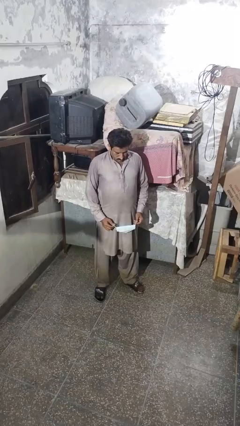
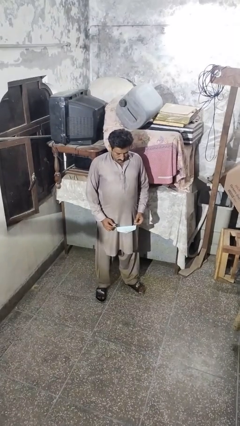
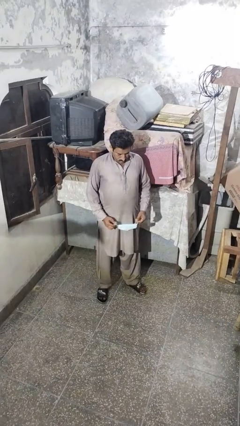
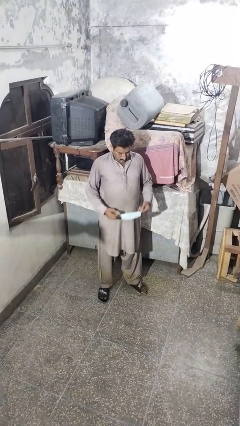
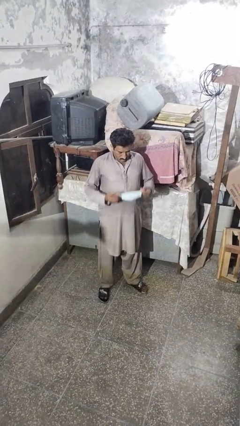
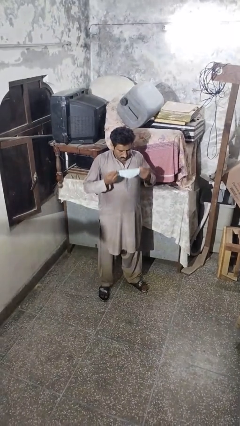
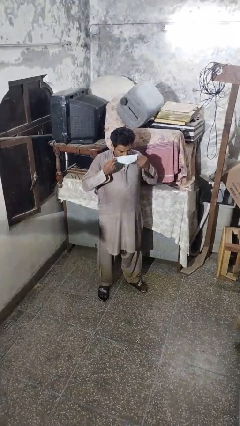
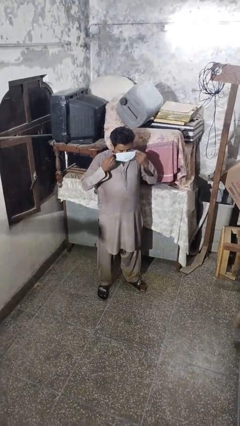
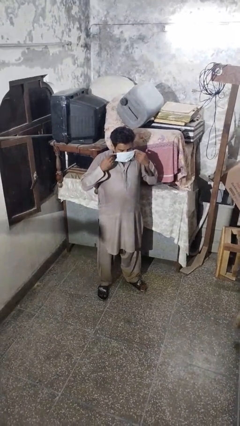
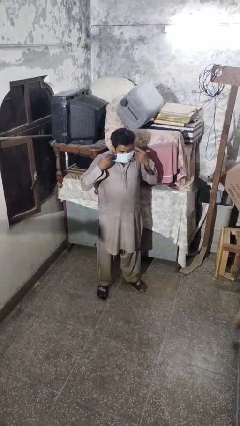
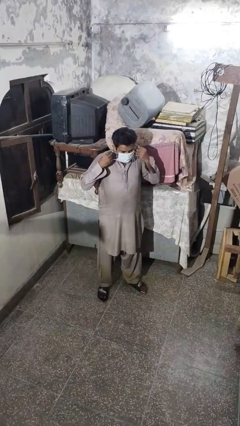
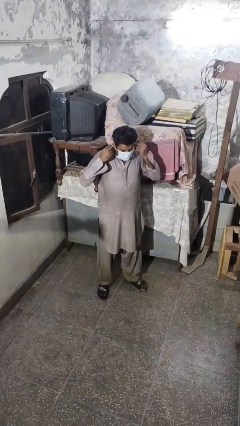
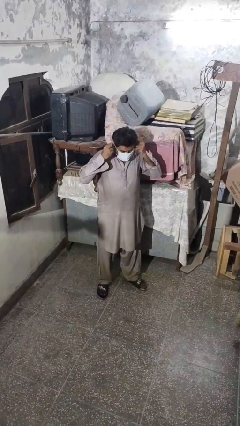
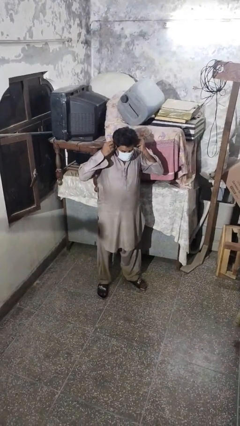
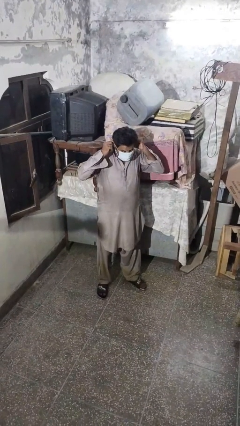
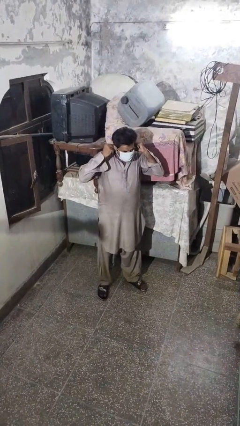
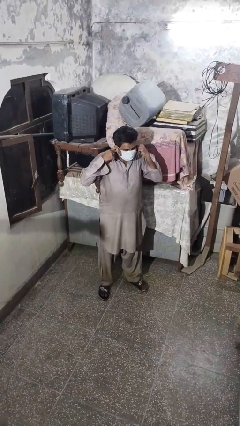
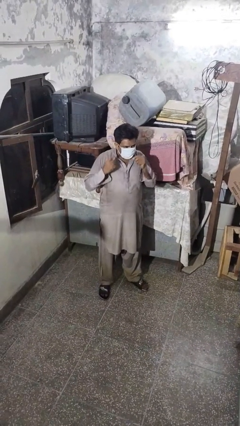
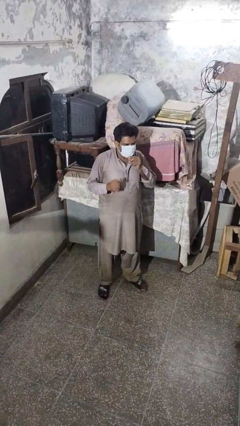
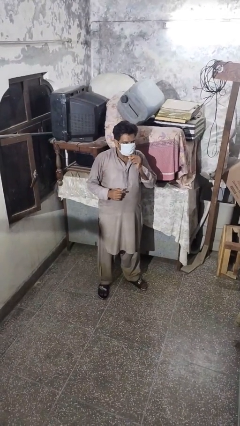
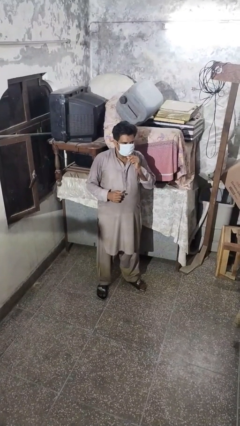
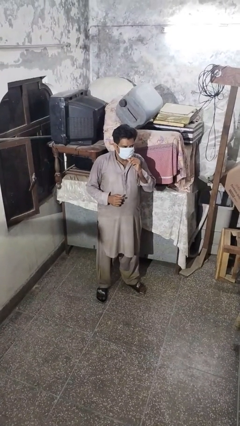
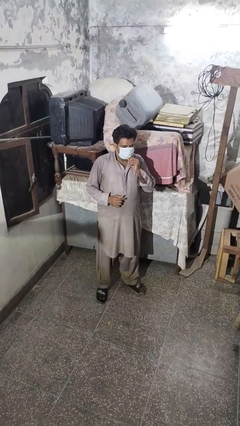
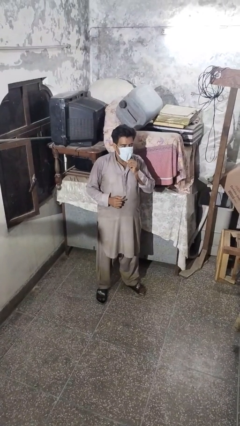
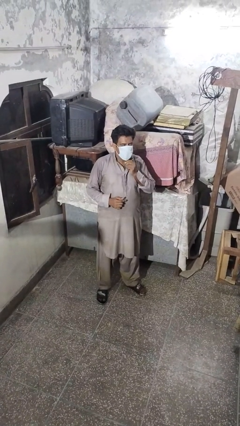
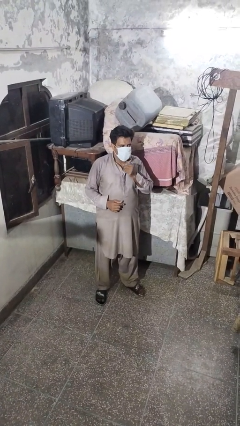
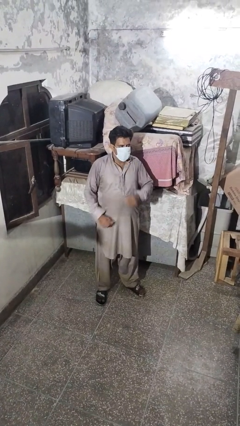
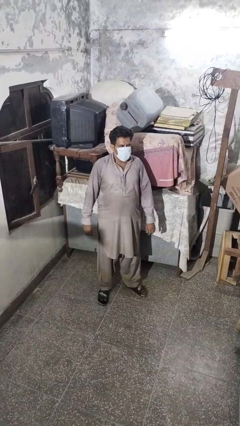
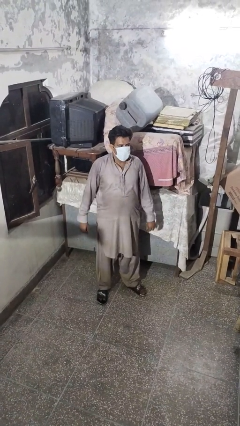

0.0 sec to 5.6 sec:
person puts on facemask

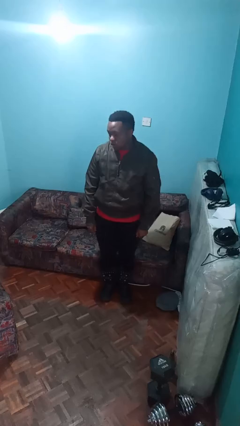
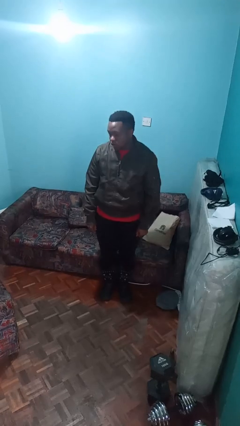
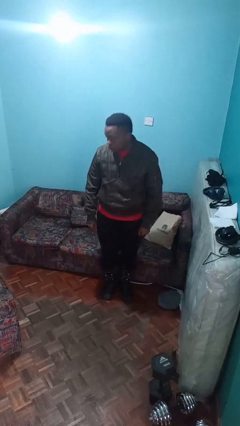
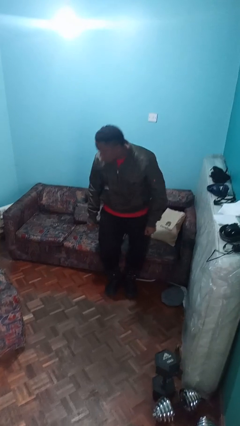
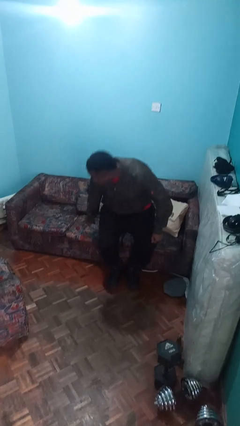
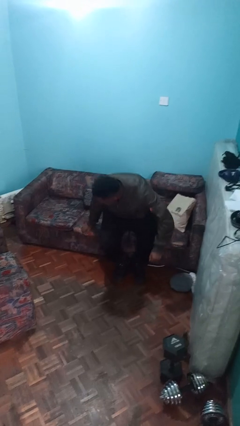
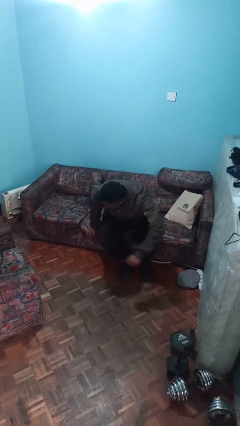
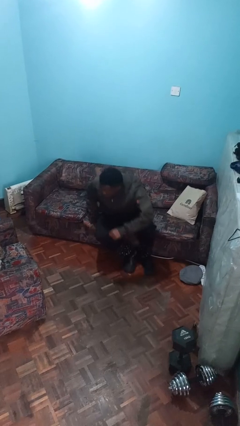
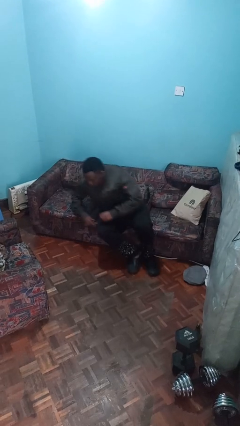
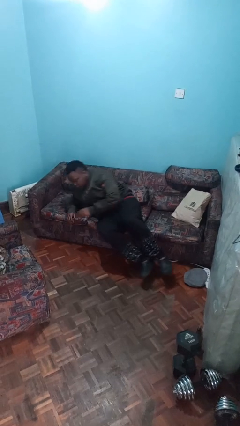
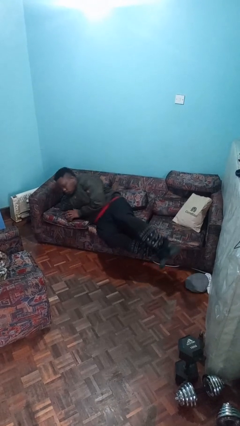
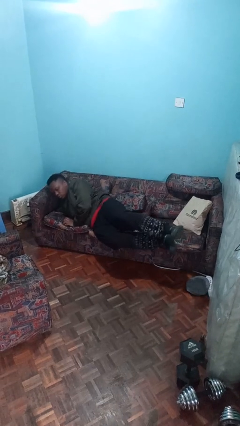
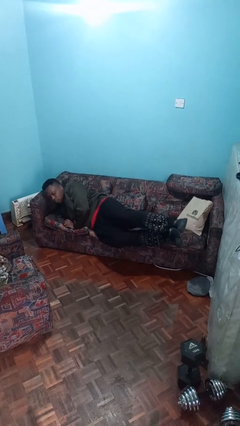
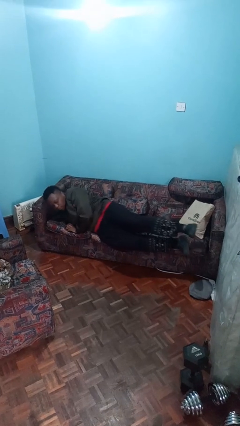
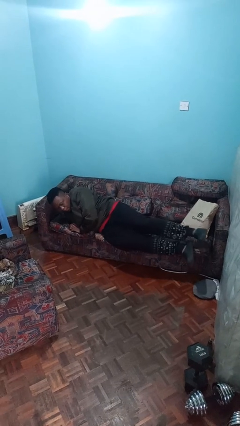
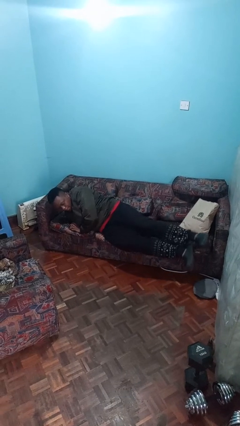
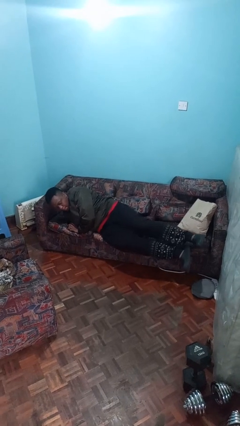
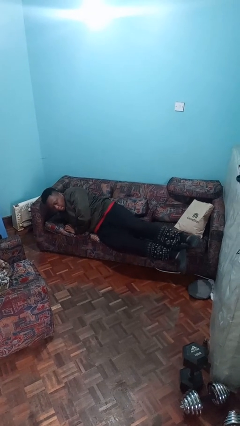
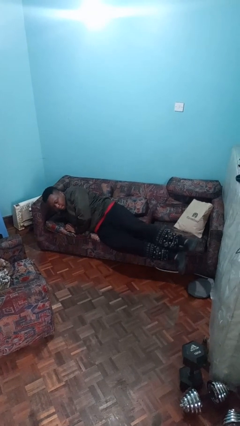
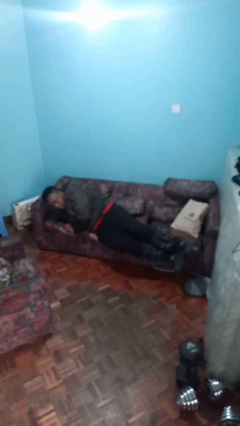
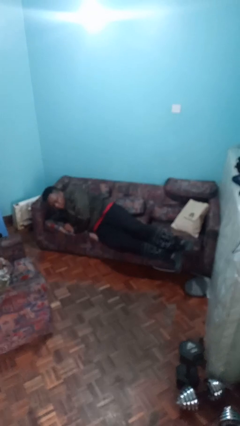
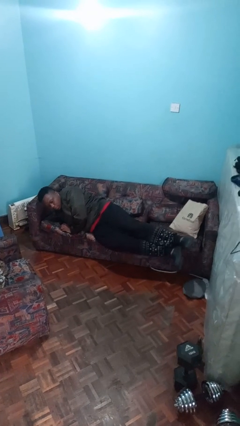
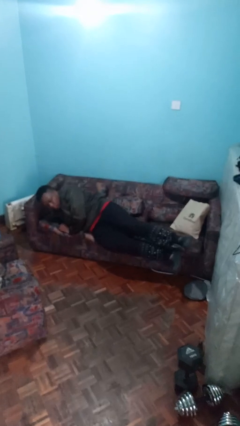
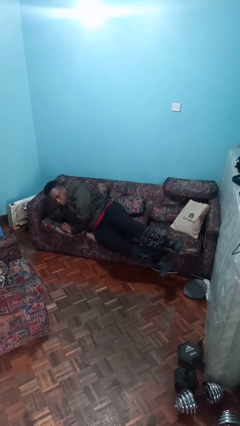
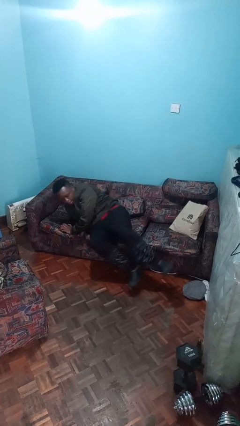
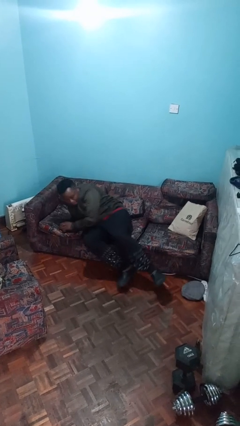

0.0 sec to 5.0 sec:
person lies down on couch

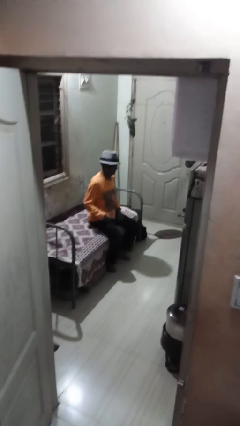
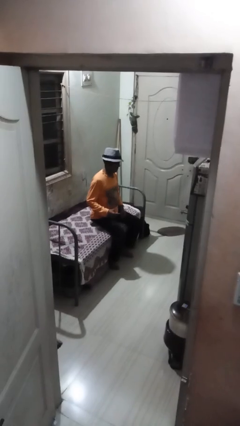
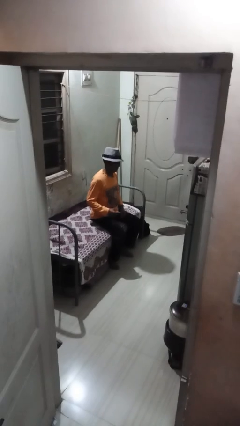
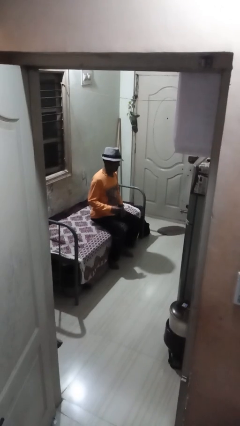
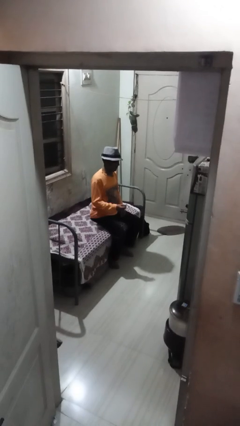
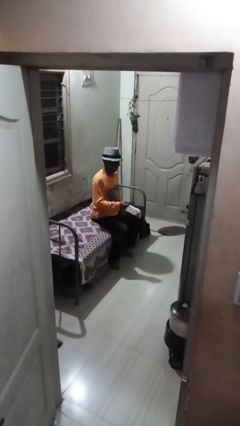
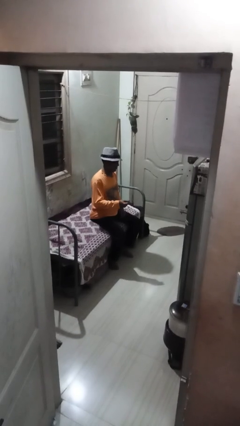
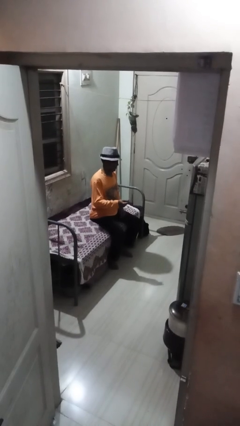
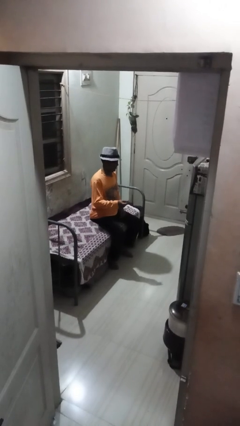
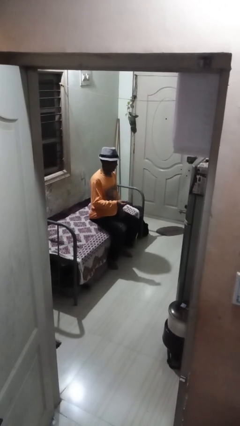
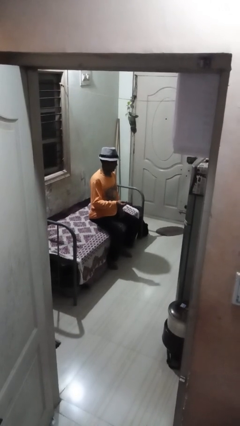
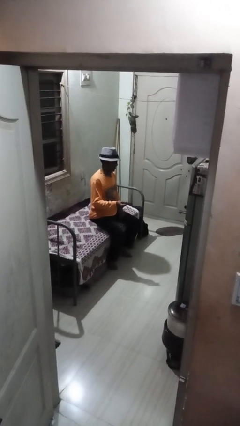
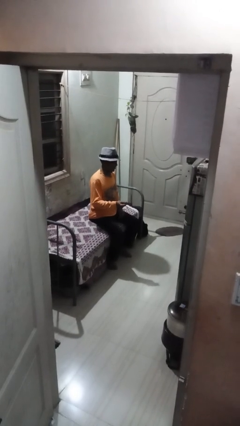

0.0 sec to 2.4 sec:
person snaps fingers

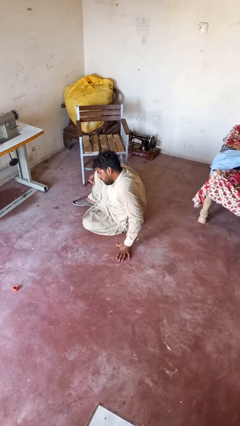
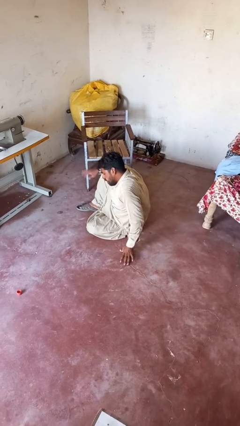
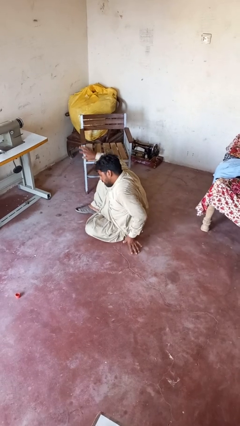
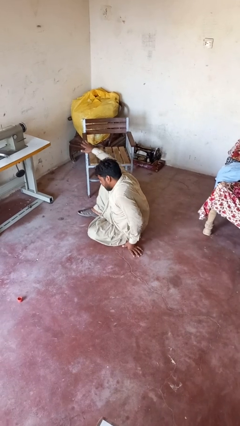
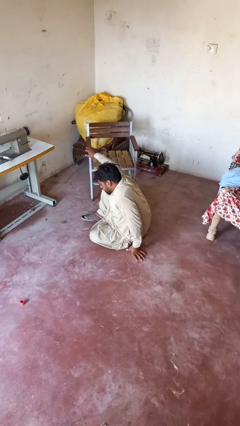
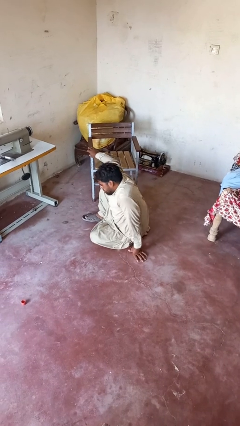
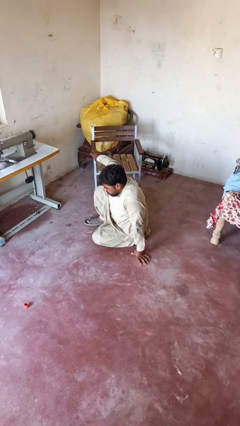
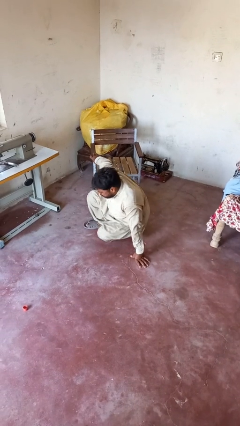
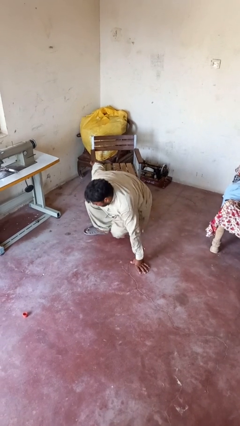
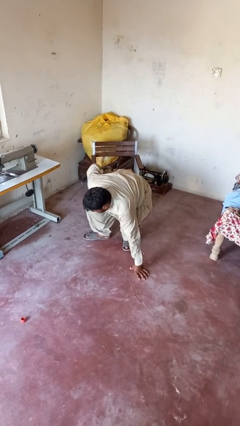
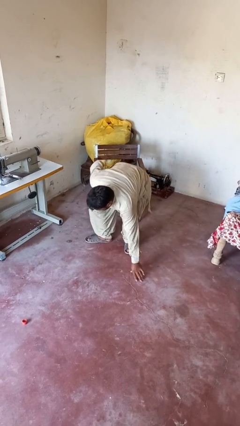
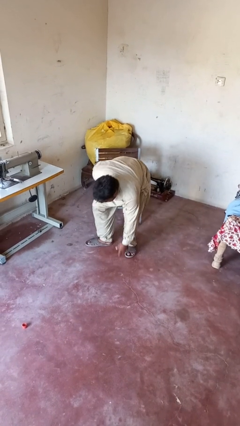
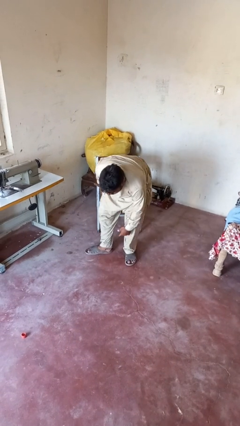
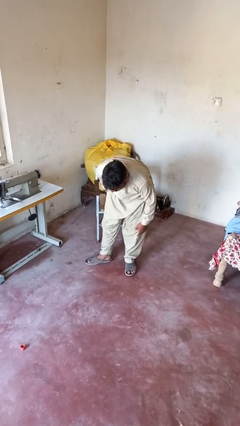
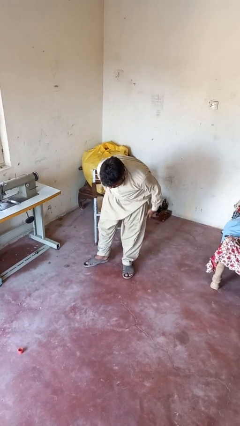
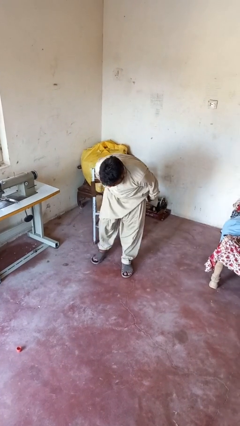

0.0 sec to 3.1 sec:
person stands up from floor

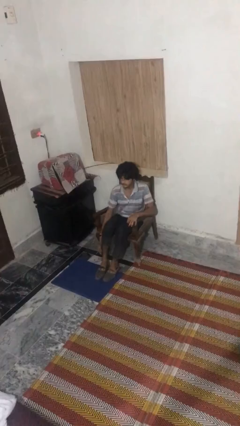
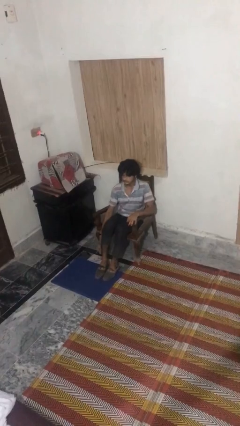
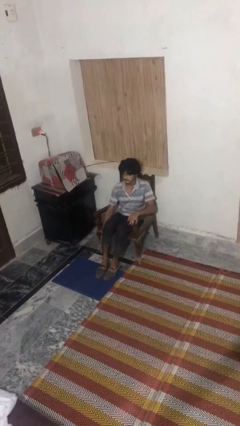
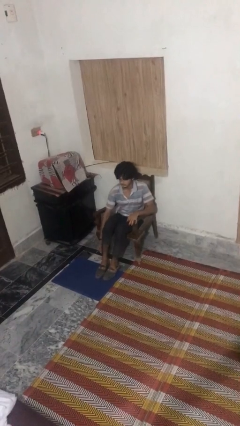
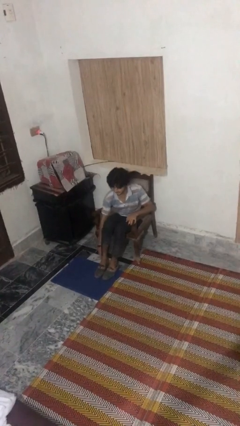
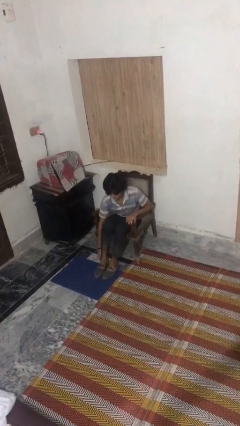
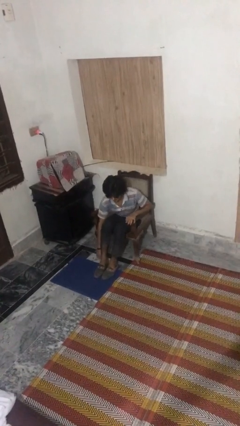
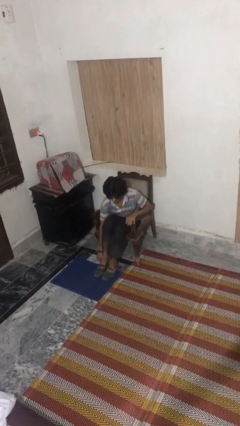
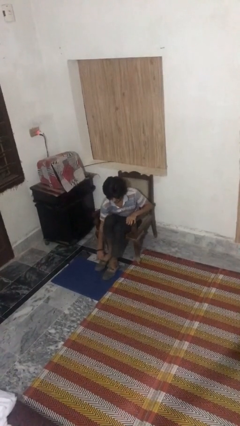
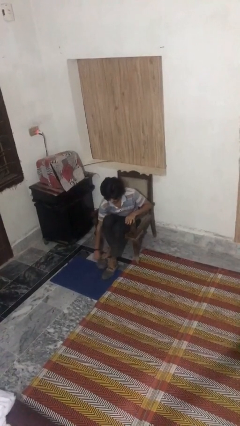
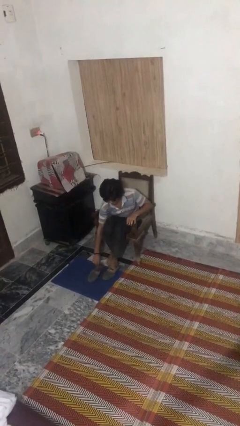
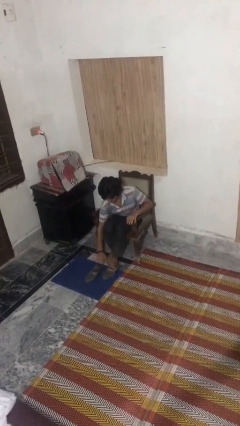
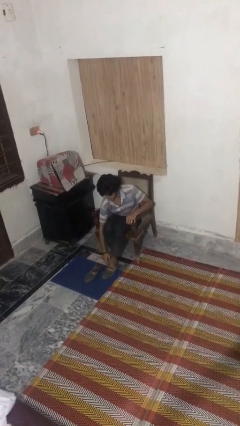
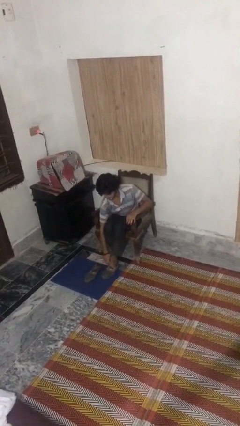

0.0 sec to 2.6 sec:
person takes off shoes
